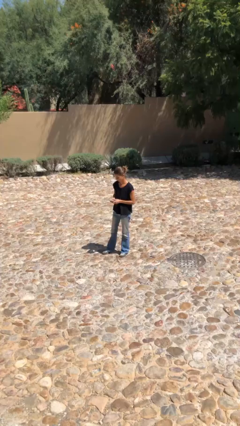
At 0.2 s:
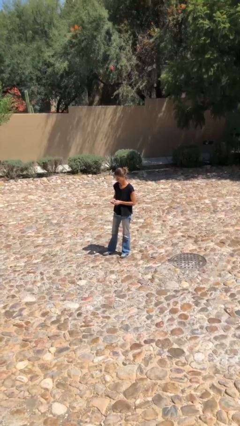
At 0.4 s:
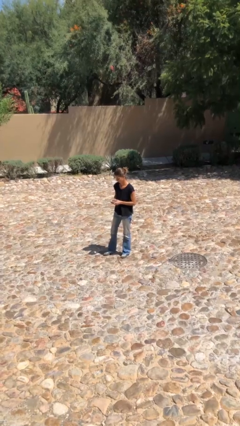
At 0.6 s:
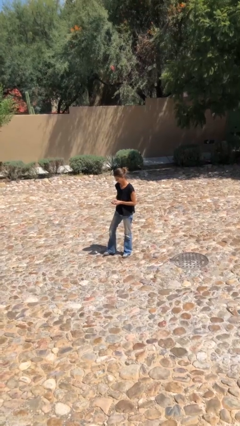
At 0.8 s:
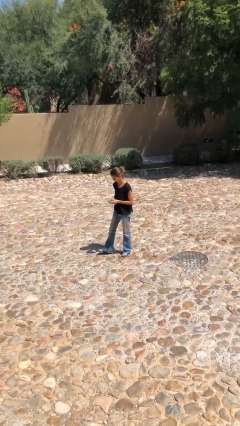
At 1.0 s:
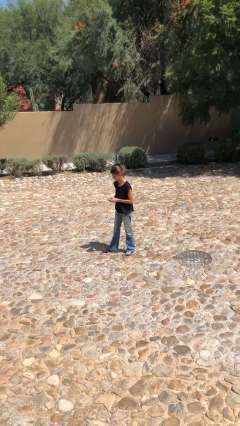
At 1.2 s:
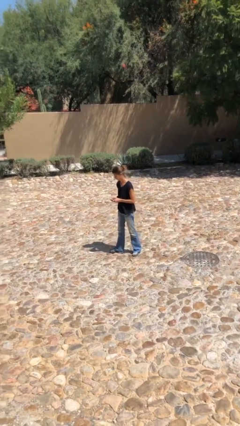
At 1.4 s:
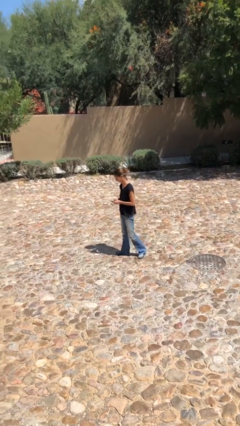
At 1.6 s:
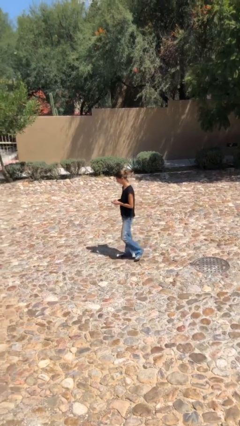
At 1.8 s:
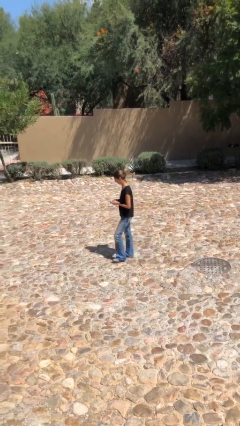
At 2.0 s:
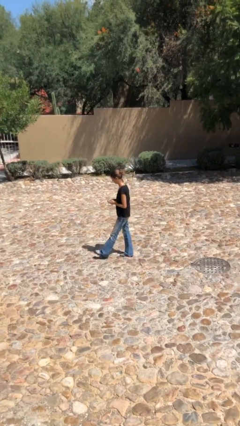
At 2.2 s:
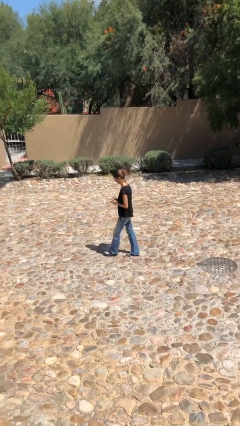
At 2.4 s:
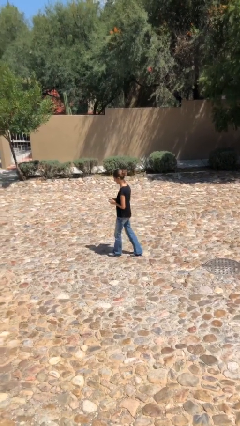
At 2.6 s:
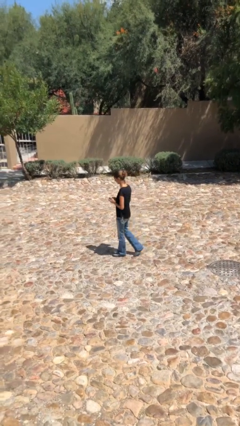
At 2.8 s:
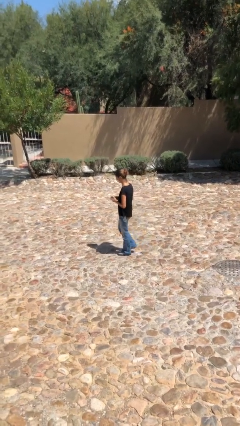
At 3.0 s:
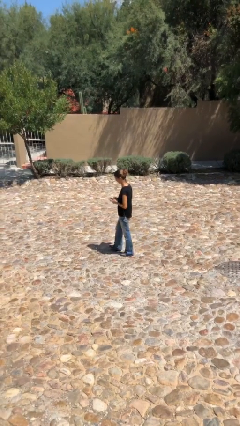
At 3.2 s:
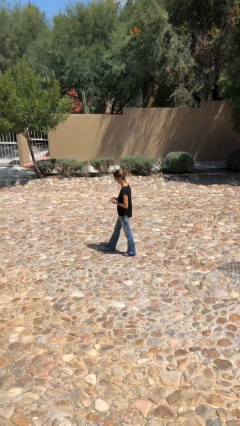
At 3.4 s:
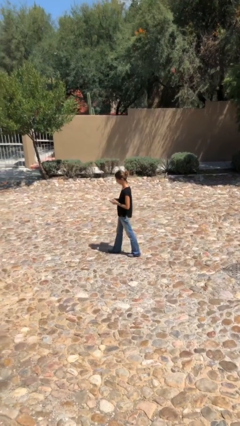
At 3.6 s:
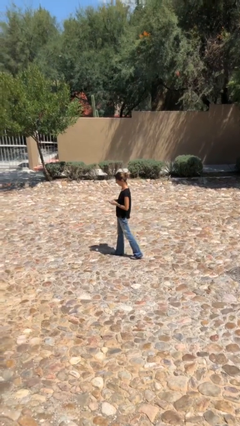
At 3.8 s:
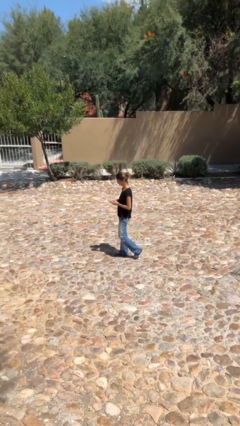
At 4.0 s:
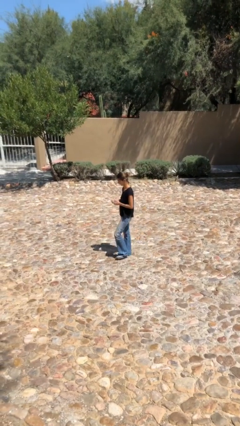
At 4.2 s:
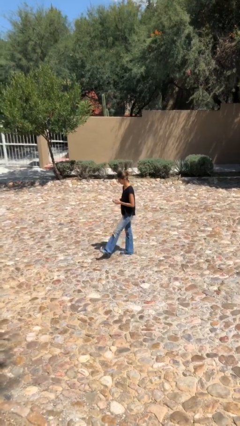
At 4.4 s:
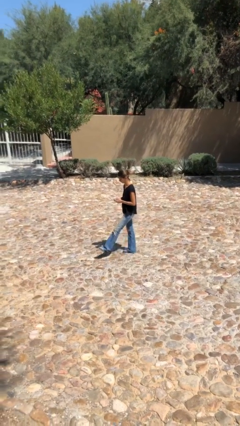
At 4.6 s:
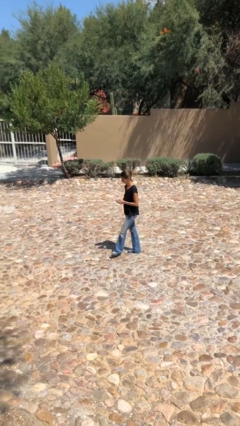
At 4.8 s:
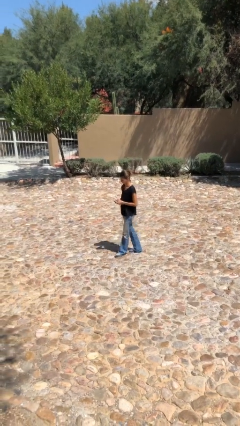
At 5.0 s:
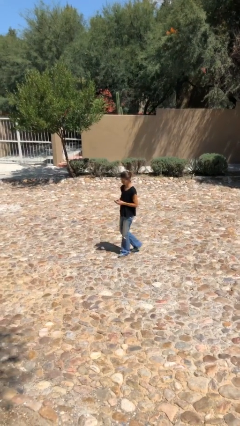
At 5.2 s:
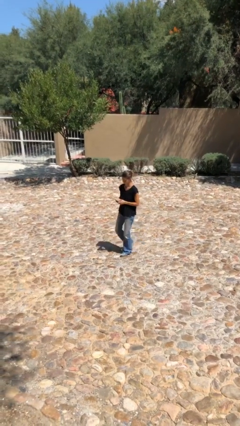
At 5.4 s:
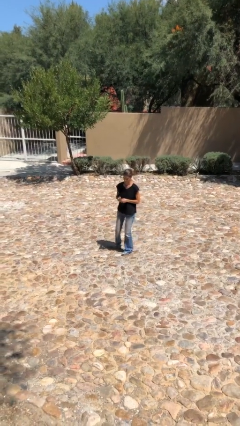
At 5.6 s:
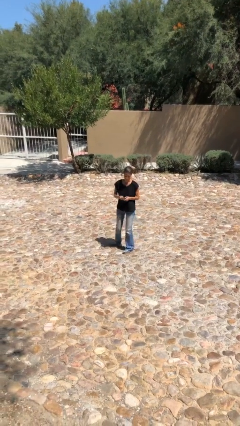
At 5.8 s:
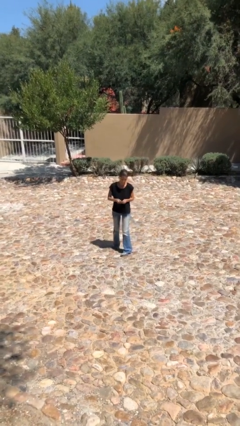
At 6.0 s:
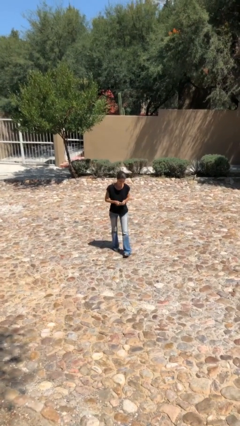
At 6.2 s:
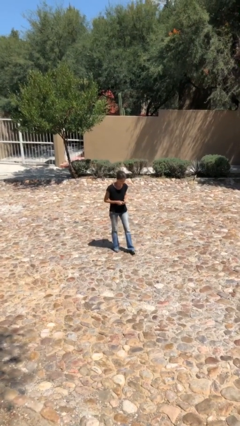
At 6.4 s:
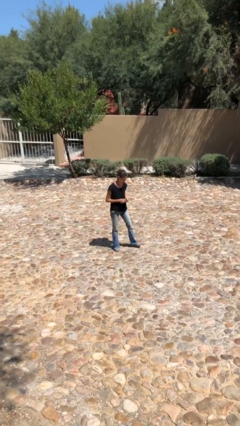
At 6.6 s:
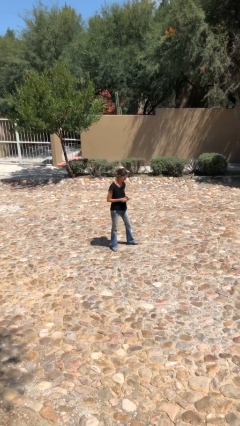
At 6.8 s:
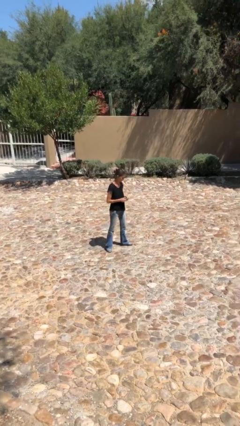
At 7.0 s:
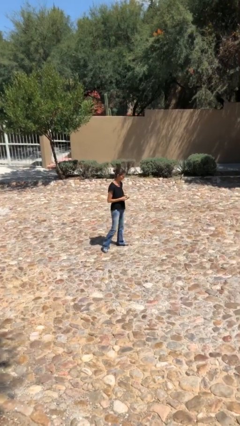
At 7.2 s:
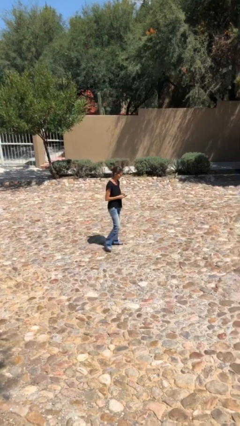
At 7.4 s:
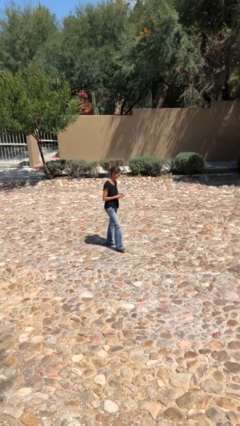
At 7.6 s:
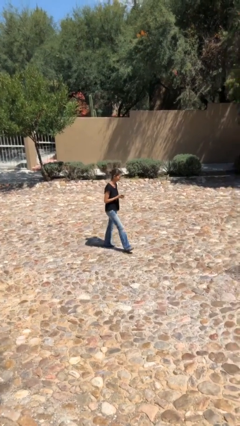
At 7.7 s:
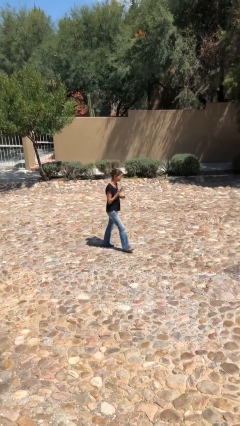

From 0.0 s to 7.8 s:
person texts on phone

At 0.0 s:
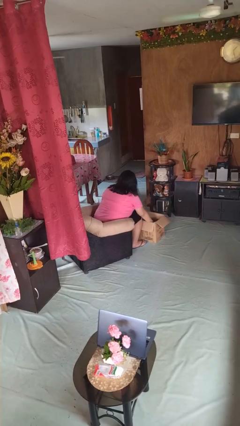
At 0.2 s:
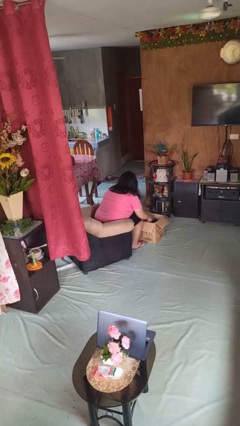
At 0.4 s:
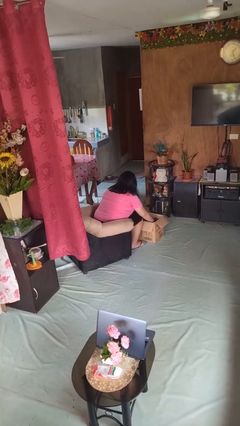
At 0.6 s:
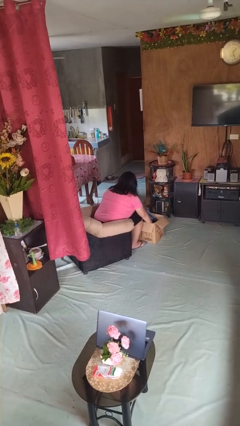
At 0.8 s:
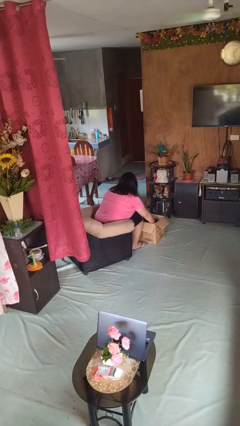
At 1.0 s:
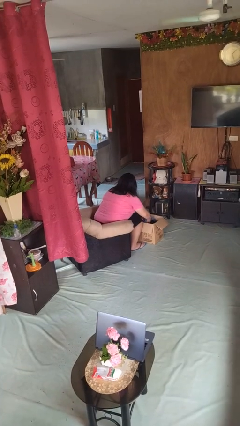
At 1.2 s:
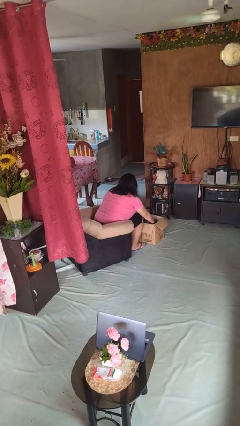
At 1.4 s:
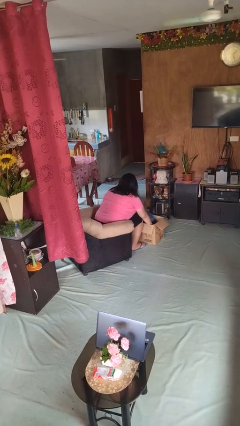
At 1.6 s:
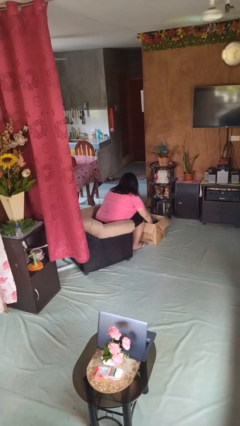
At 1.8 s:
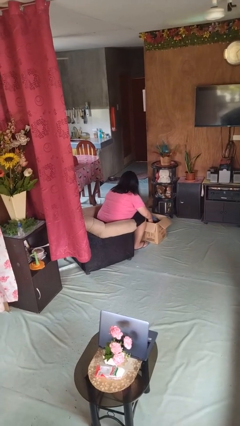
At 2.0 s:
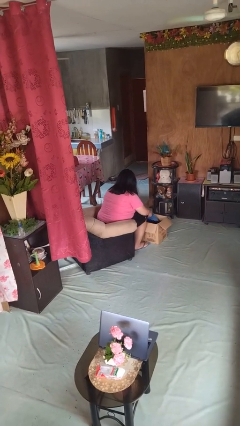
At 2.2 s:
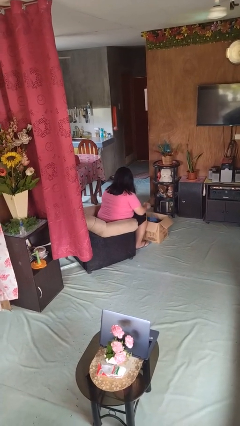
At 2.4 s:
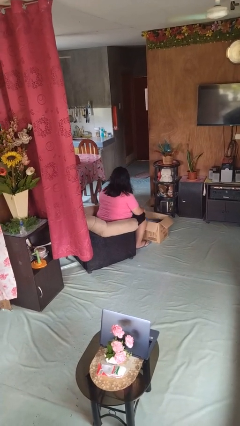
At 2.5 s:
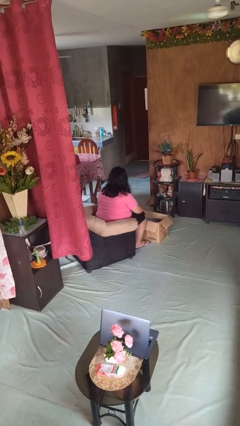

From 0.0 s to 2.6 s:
person searches in box

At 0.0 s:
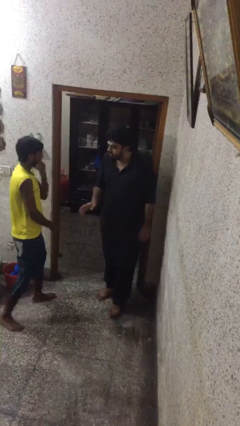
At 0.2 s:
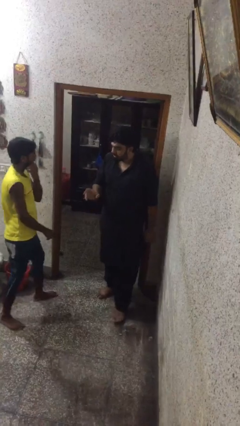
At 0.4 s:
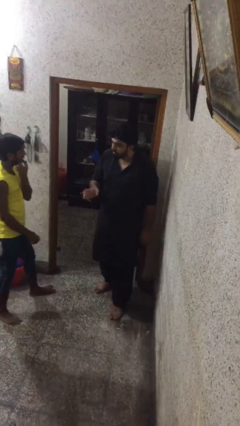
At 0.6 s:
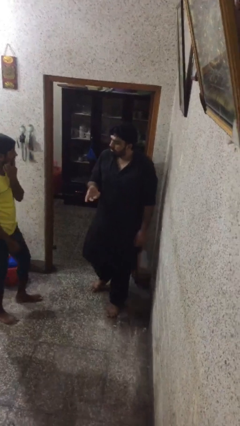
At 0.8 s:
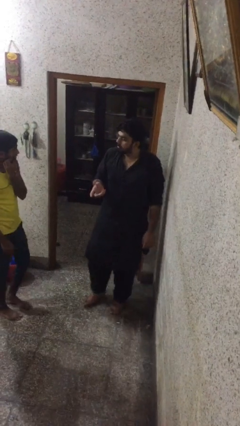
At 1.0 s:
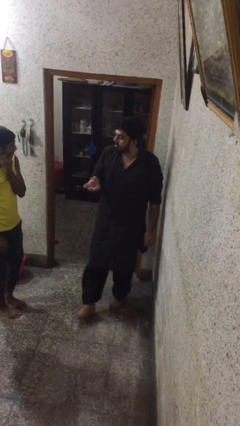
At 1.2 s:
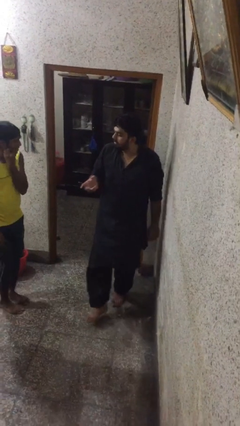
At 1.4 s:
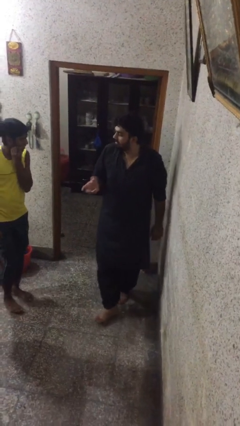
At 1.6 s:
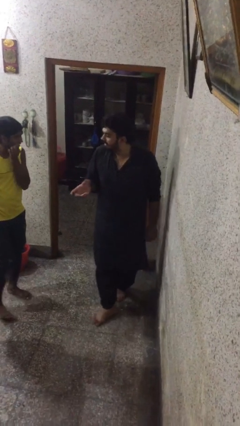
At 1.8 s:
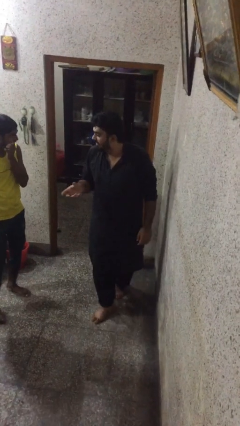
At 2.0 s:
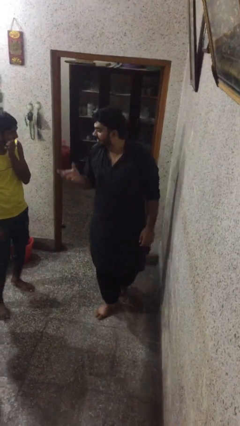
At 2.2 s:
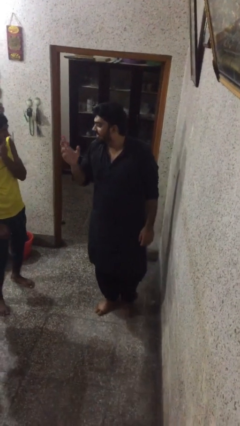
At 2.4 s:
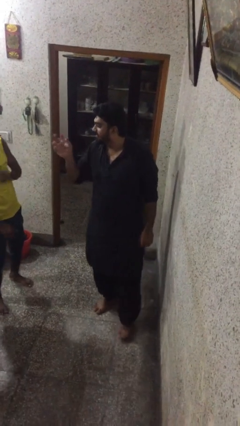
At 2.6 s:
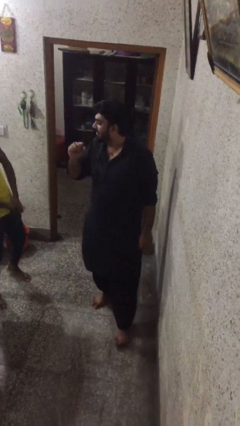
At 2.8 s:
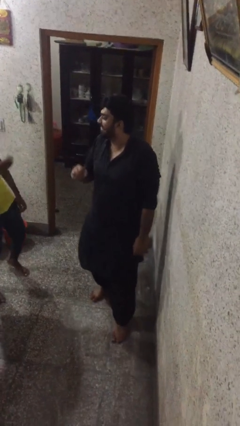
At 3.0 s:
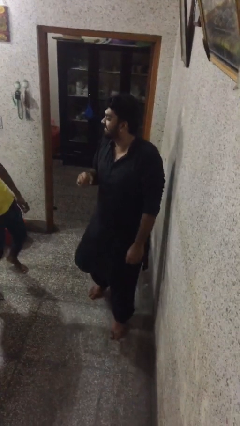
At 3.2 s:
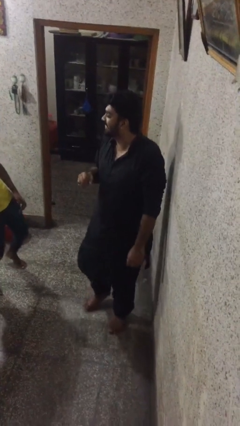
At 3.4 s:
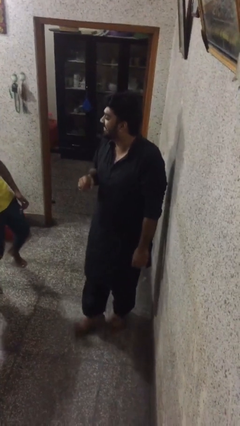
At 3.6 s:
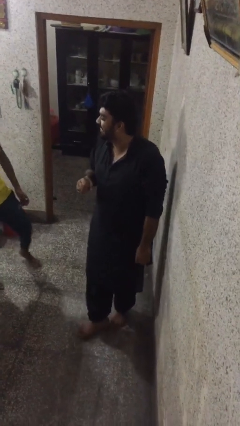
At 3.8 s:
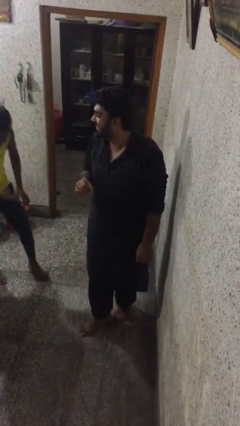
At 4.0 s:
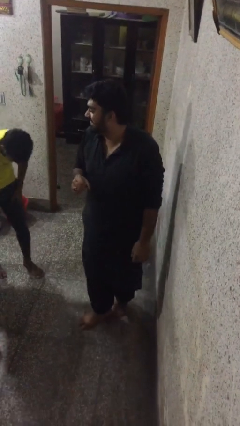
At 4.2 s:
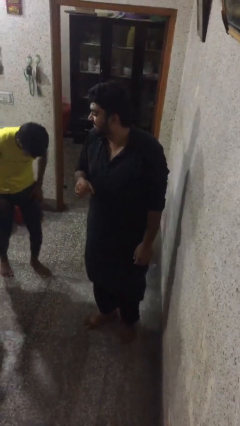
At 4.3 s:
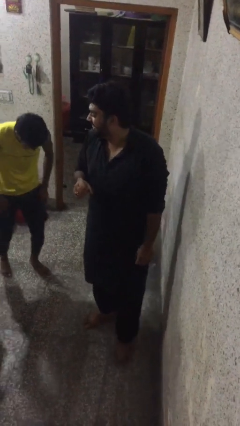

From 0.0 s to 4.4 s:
person talks to person

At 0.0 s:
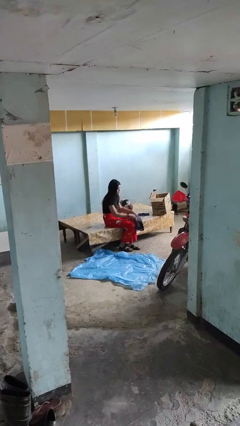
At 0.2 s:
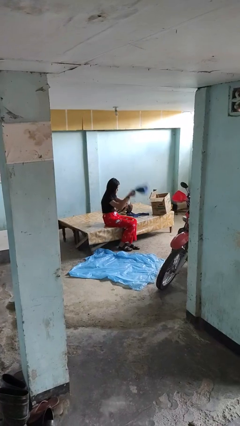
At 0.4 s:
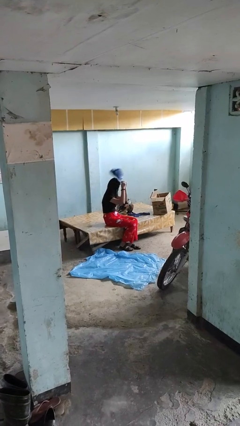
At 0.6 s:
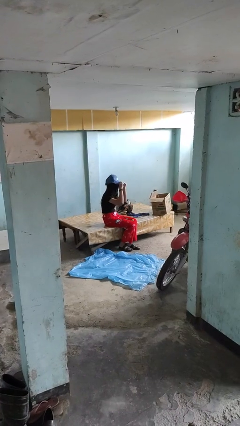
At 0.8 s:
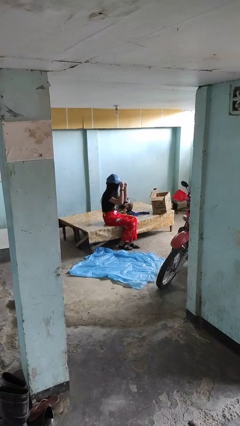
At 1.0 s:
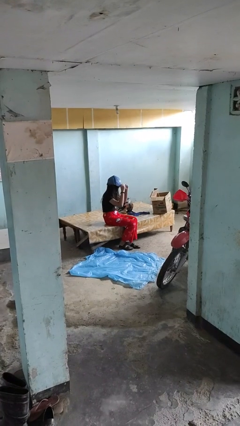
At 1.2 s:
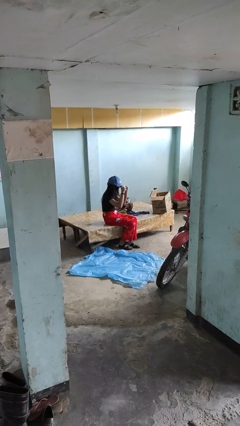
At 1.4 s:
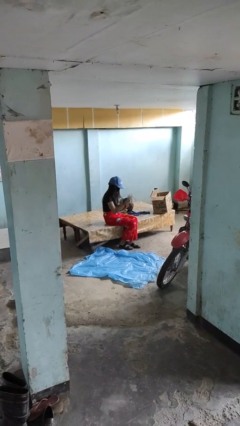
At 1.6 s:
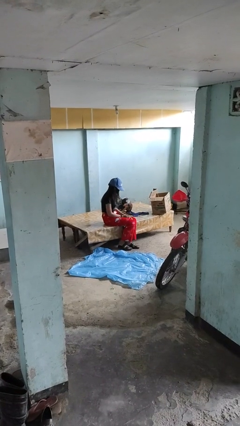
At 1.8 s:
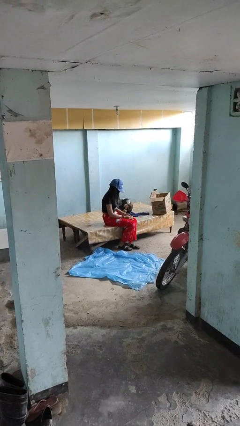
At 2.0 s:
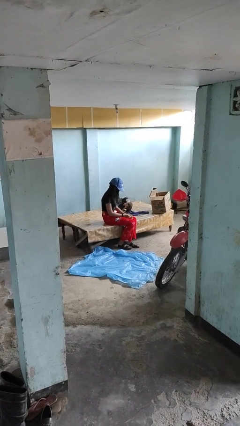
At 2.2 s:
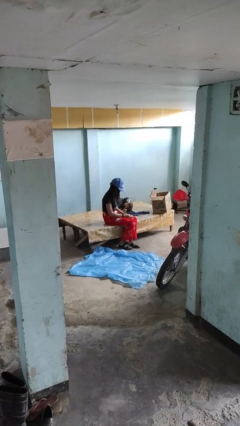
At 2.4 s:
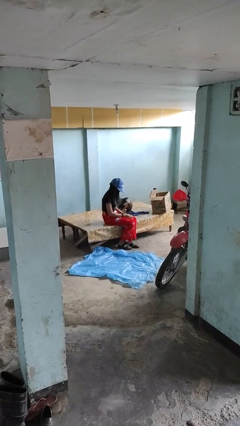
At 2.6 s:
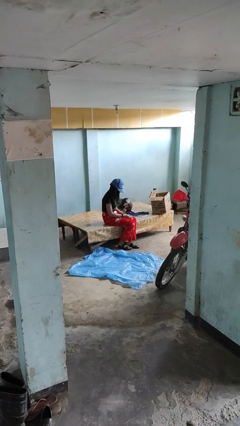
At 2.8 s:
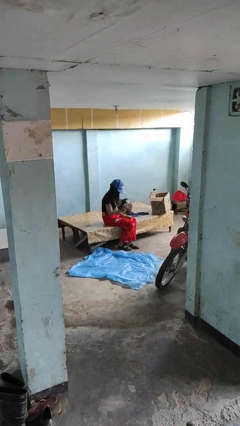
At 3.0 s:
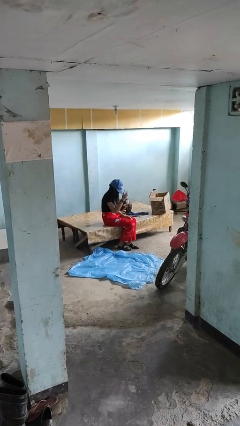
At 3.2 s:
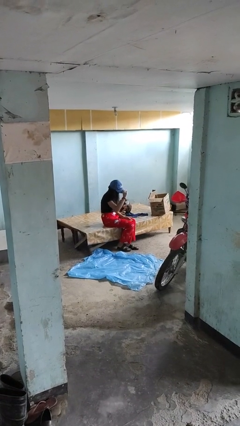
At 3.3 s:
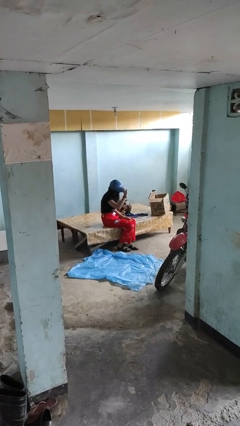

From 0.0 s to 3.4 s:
person puts on hat
